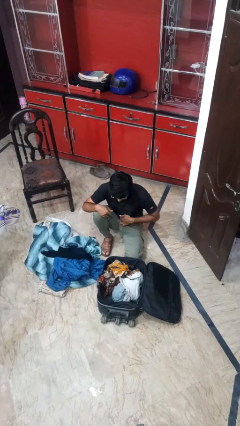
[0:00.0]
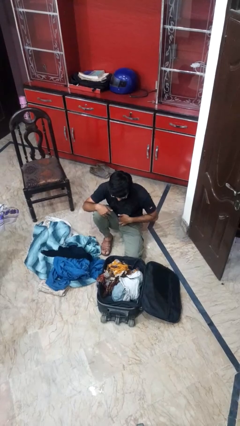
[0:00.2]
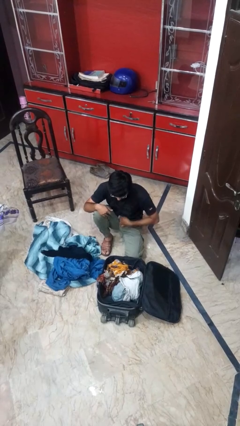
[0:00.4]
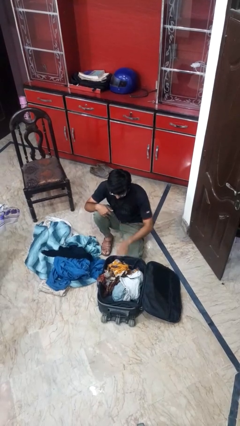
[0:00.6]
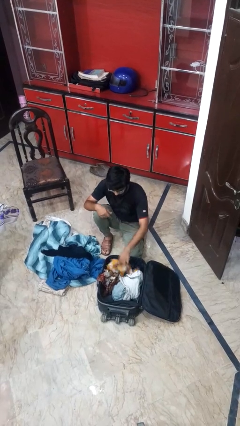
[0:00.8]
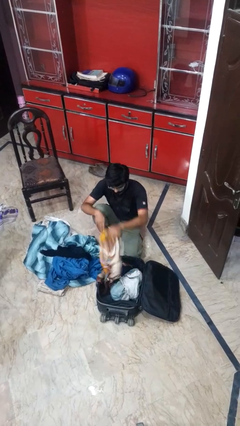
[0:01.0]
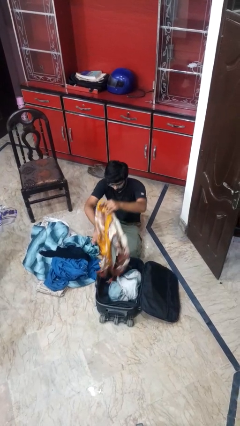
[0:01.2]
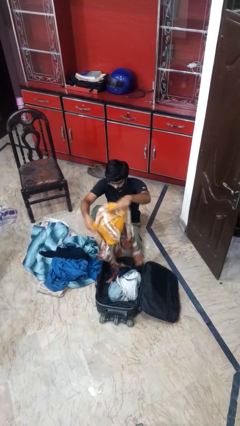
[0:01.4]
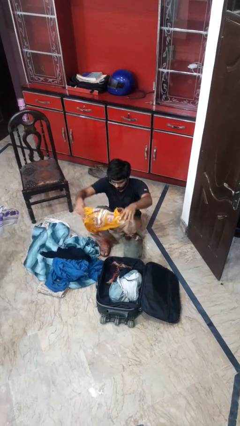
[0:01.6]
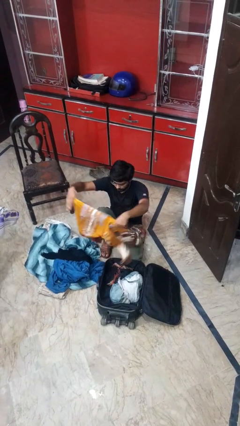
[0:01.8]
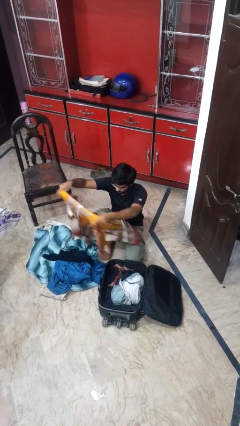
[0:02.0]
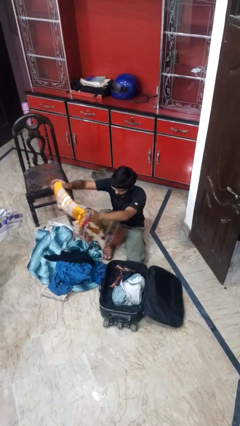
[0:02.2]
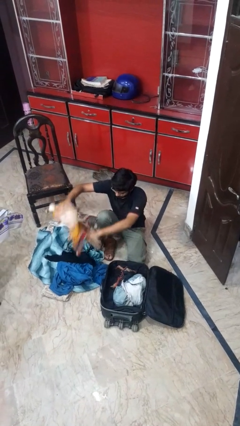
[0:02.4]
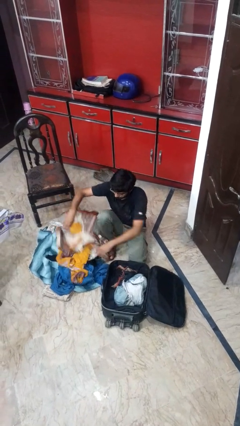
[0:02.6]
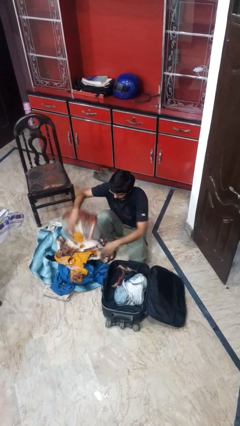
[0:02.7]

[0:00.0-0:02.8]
person unloads clothes from suitcase

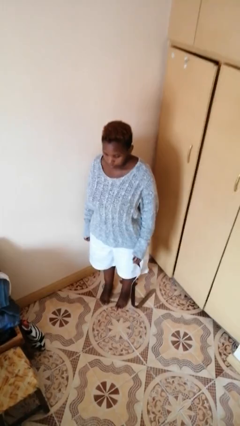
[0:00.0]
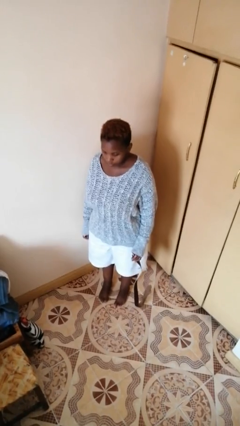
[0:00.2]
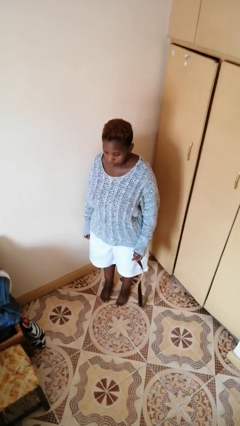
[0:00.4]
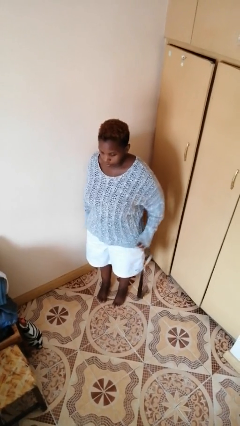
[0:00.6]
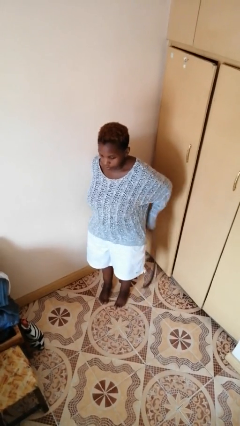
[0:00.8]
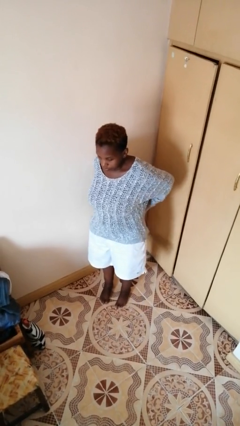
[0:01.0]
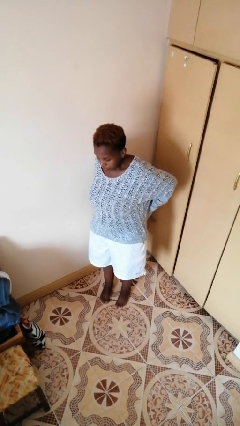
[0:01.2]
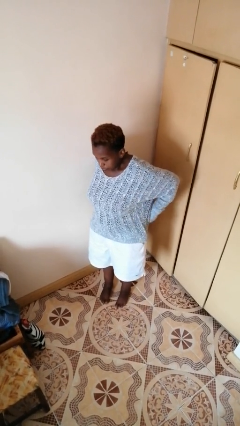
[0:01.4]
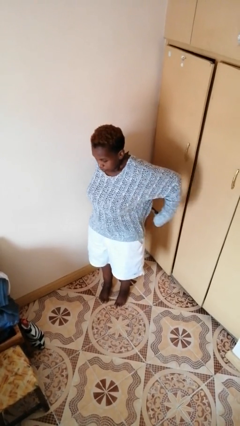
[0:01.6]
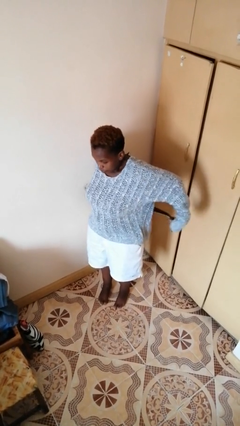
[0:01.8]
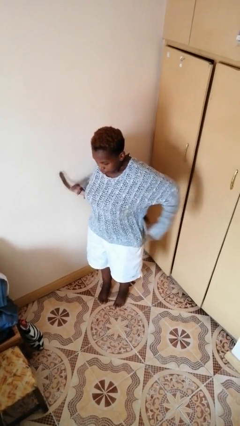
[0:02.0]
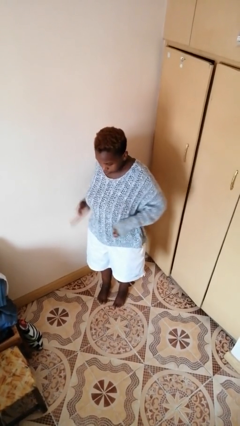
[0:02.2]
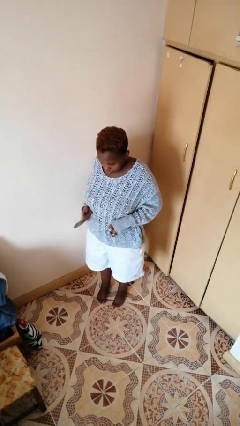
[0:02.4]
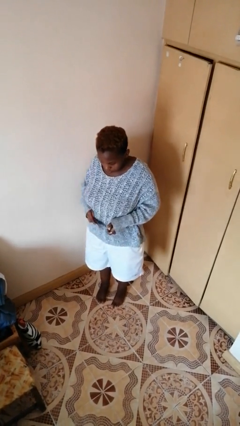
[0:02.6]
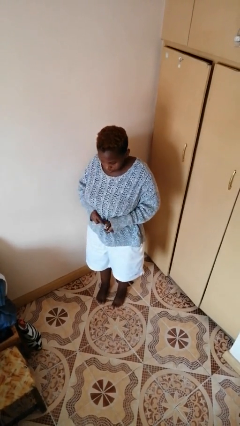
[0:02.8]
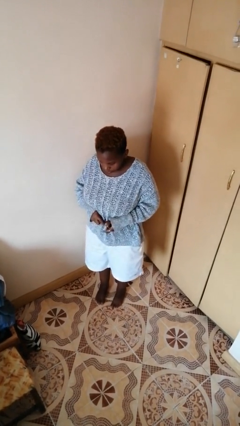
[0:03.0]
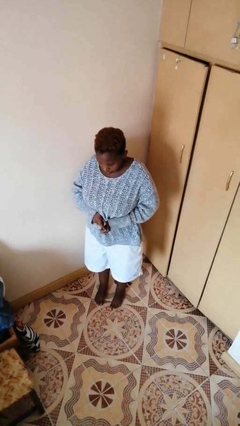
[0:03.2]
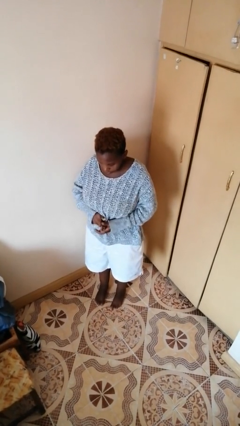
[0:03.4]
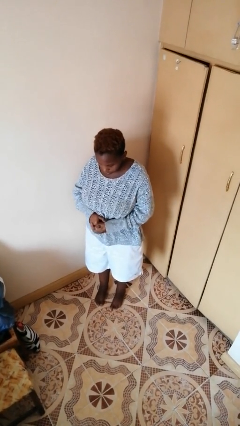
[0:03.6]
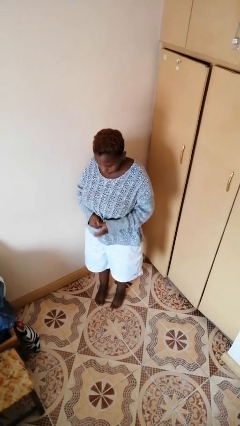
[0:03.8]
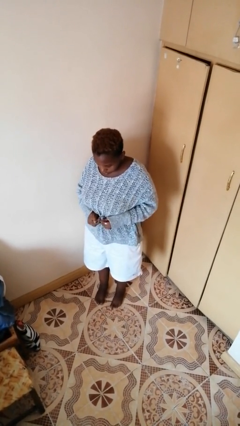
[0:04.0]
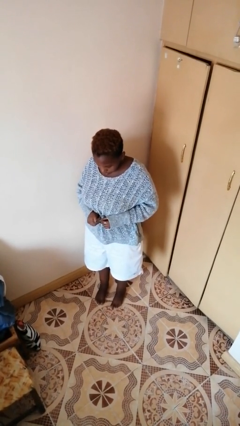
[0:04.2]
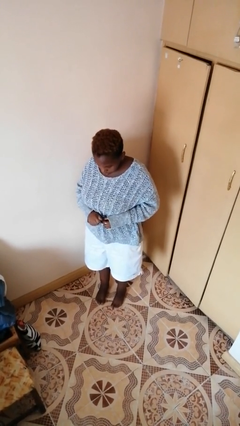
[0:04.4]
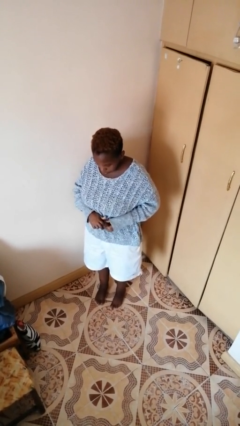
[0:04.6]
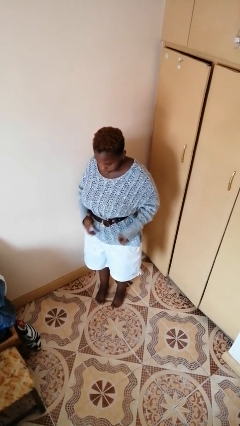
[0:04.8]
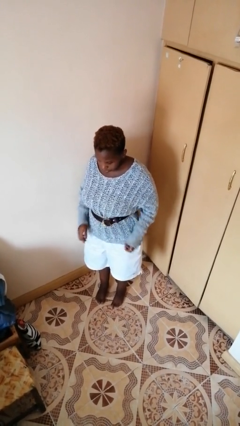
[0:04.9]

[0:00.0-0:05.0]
person puts on belt

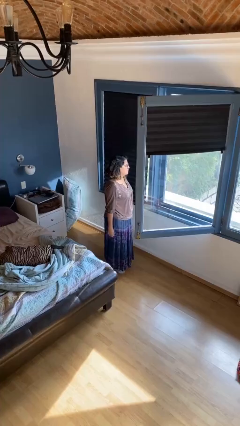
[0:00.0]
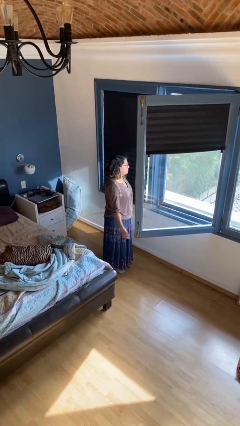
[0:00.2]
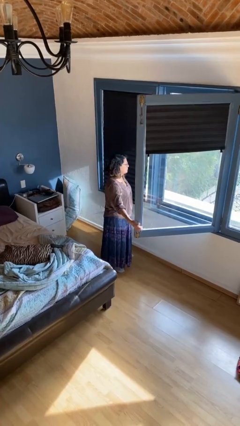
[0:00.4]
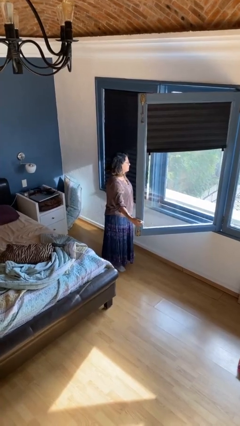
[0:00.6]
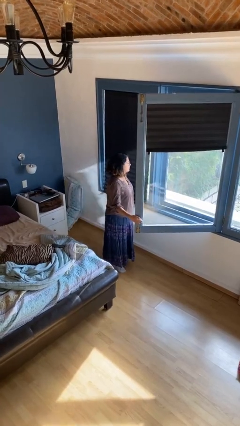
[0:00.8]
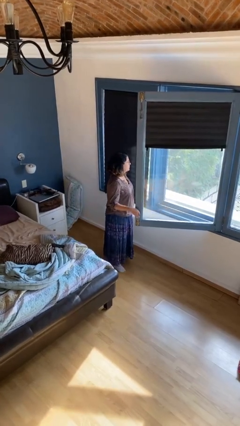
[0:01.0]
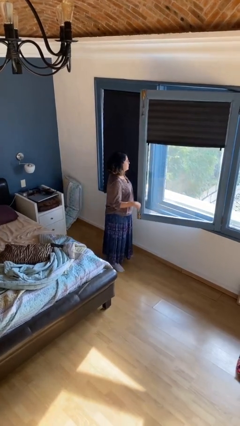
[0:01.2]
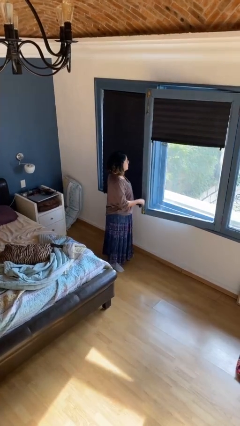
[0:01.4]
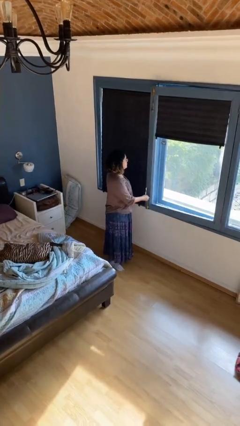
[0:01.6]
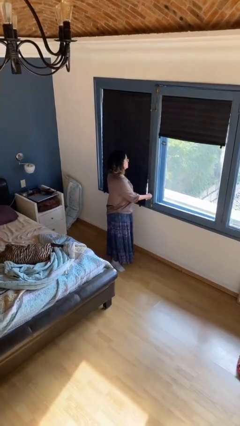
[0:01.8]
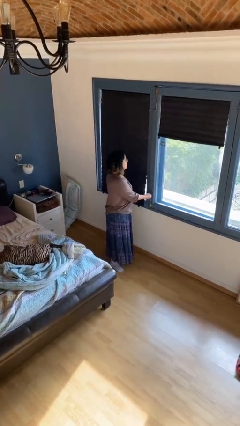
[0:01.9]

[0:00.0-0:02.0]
person closes home window

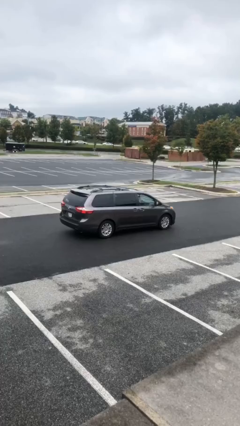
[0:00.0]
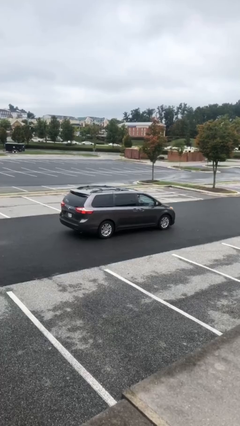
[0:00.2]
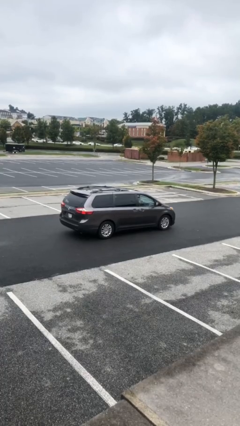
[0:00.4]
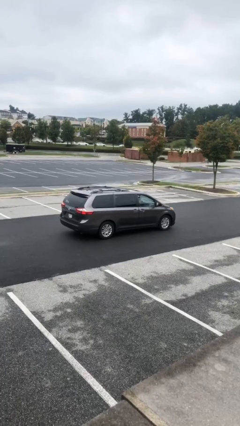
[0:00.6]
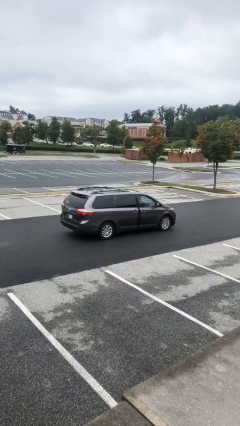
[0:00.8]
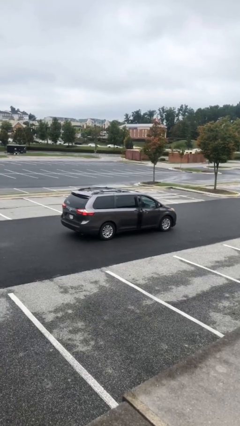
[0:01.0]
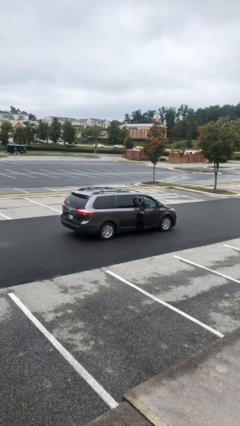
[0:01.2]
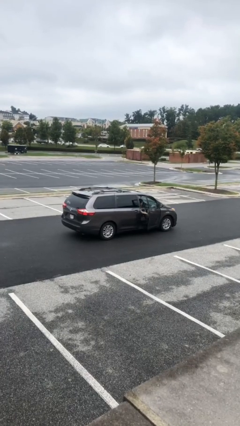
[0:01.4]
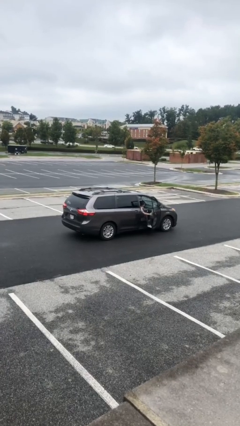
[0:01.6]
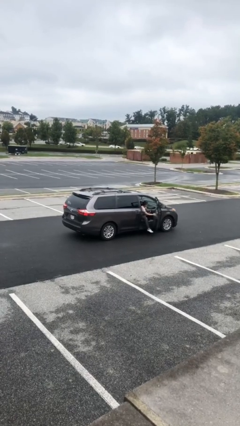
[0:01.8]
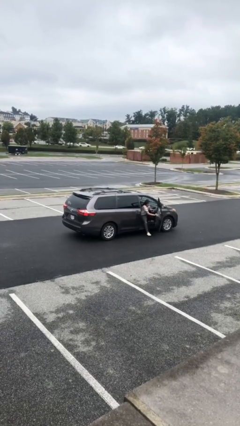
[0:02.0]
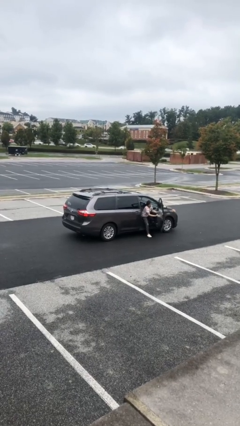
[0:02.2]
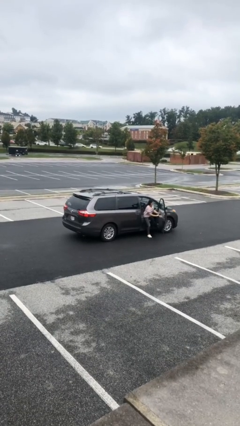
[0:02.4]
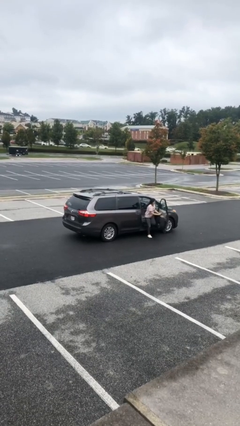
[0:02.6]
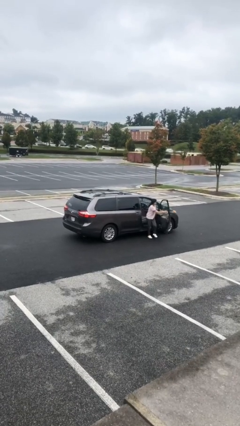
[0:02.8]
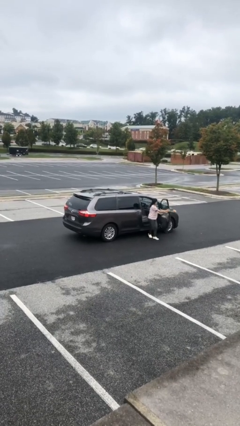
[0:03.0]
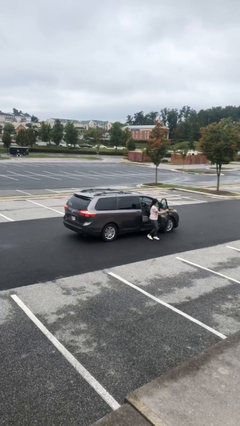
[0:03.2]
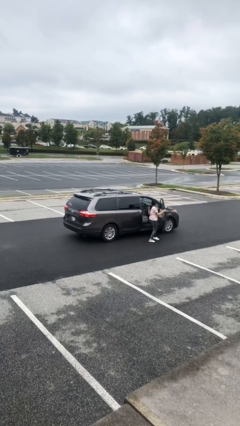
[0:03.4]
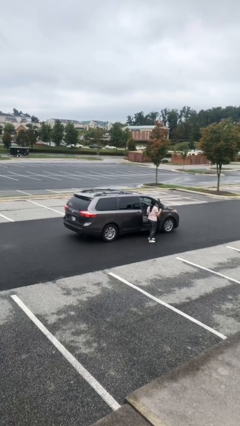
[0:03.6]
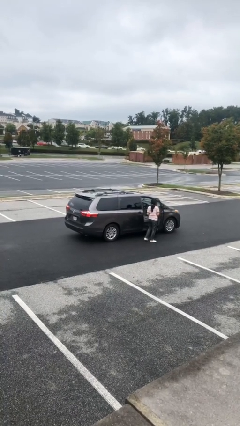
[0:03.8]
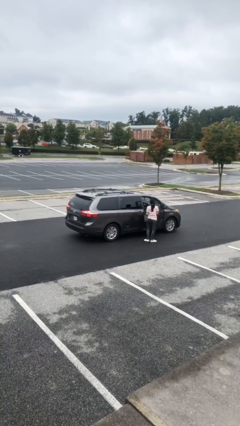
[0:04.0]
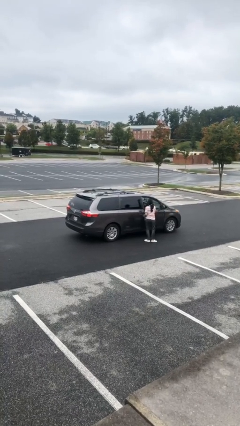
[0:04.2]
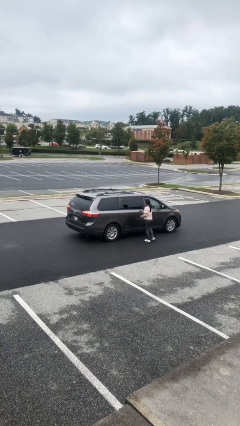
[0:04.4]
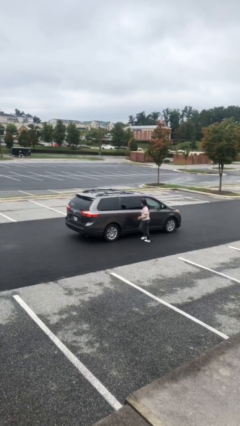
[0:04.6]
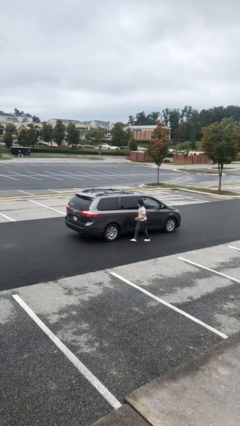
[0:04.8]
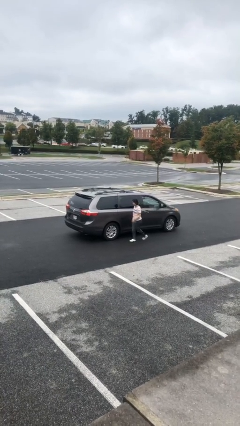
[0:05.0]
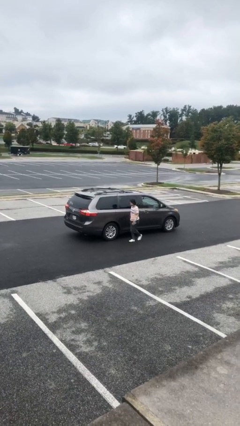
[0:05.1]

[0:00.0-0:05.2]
car drops off person

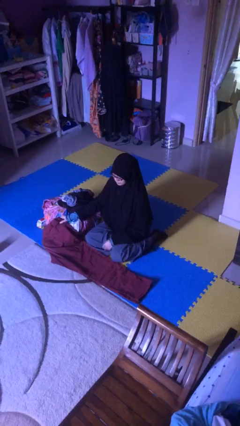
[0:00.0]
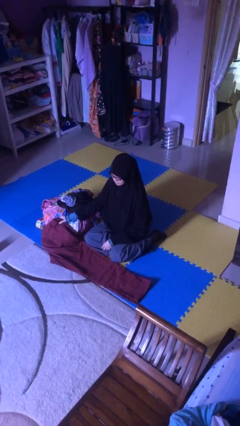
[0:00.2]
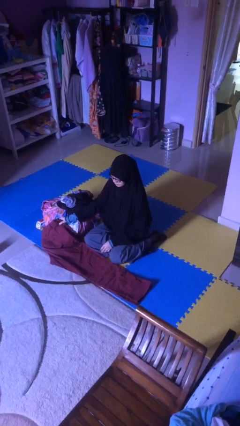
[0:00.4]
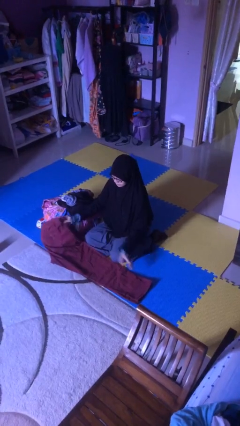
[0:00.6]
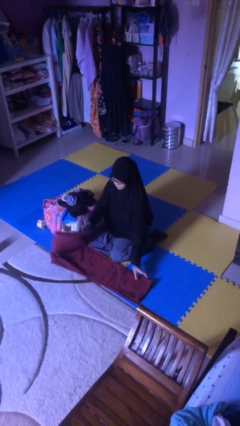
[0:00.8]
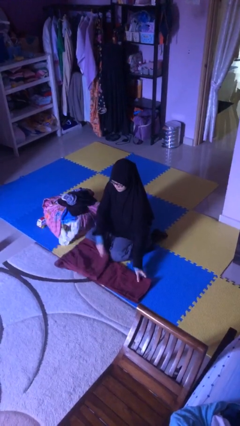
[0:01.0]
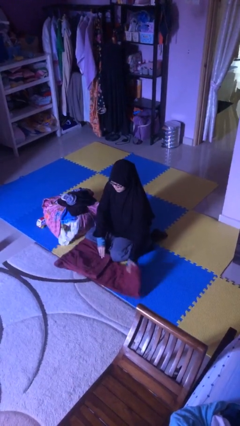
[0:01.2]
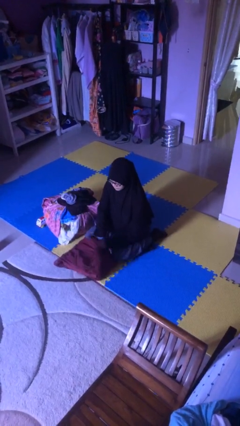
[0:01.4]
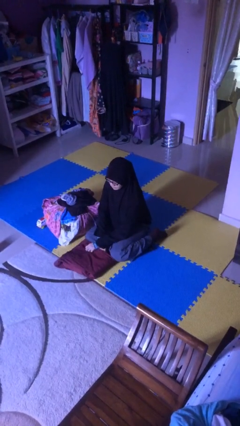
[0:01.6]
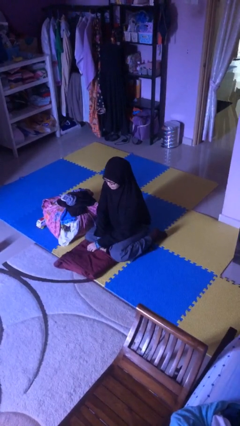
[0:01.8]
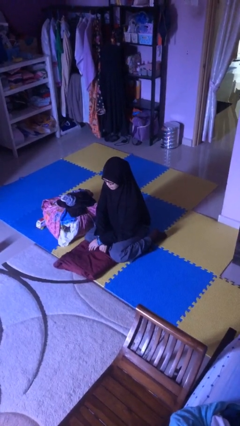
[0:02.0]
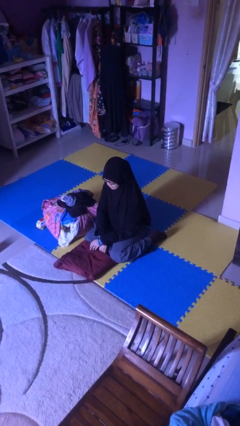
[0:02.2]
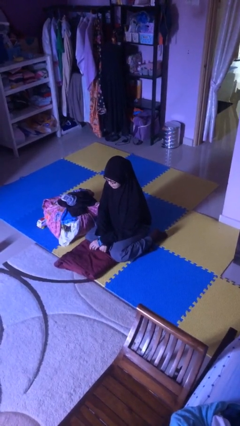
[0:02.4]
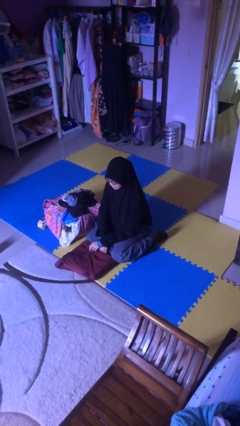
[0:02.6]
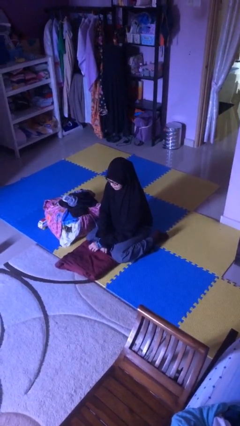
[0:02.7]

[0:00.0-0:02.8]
person folds pants
